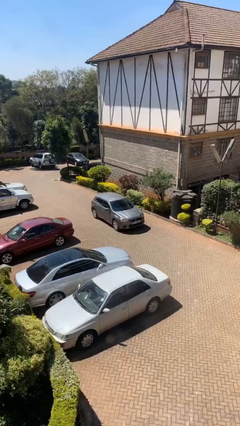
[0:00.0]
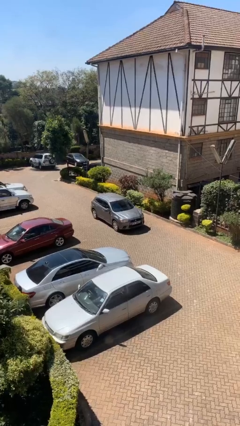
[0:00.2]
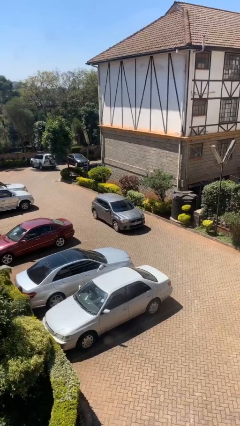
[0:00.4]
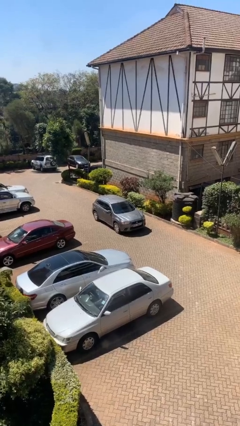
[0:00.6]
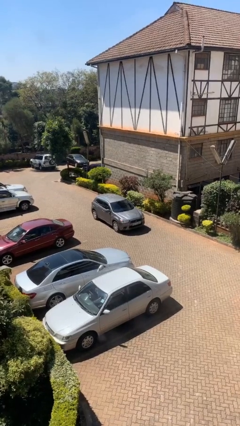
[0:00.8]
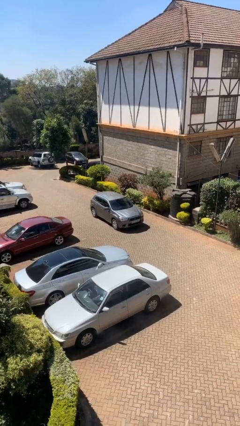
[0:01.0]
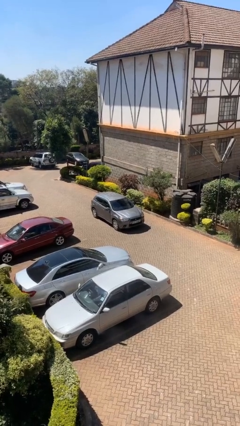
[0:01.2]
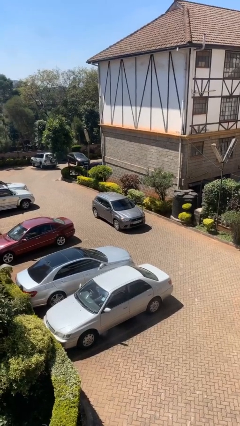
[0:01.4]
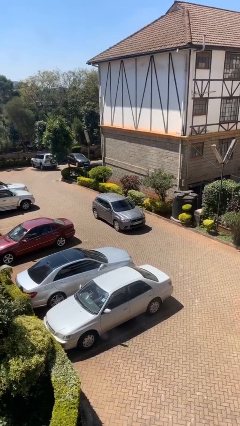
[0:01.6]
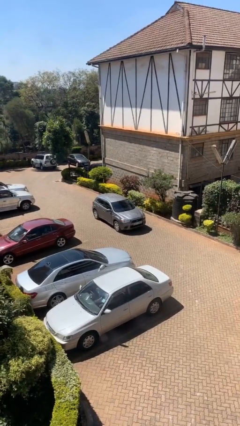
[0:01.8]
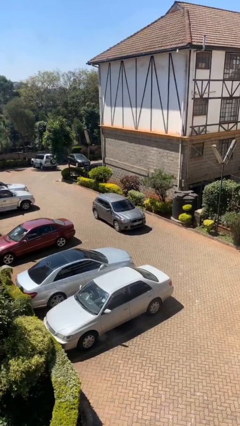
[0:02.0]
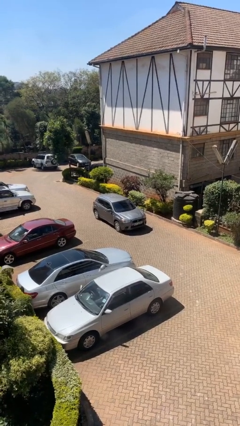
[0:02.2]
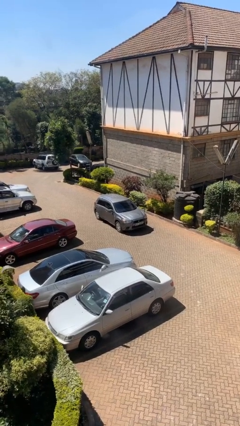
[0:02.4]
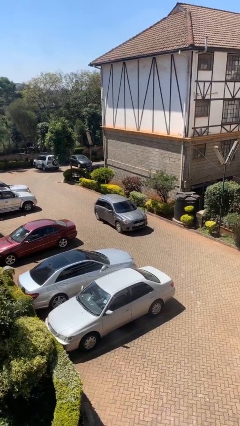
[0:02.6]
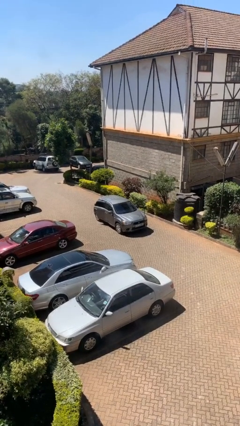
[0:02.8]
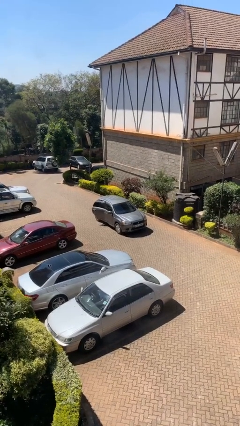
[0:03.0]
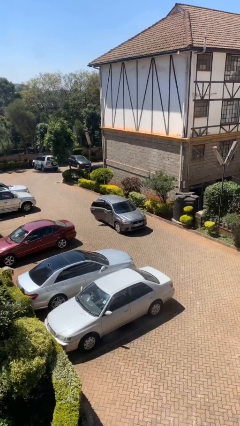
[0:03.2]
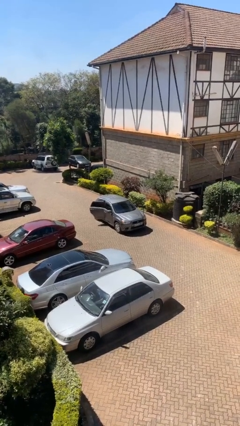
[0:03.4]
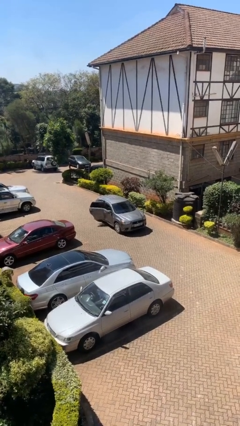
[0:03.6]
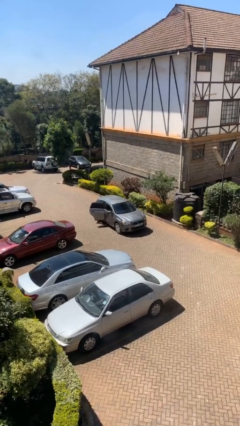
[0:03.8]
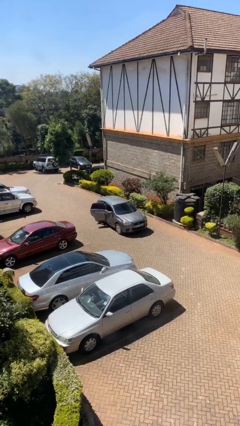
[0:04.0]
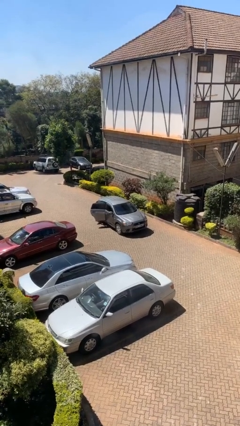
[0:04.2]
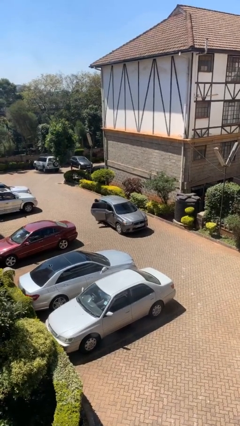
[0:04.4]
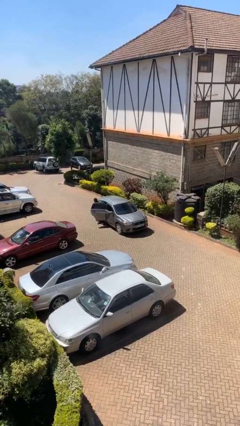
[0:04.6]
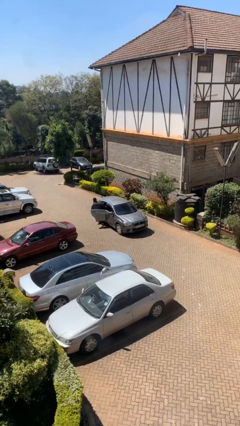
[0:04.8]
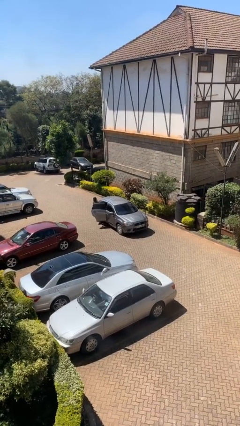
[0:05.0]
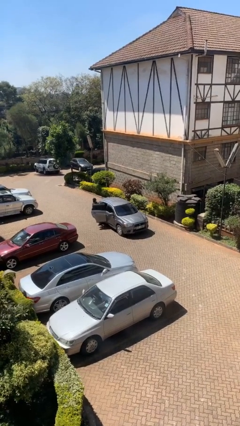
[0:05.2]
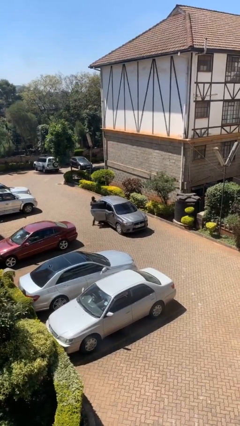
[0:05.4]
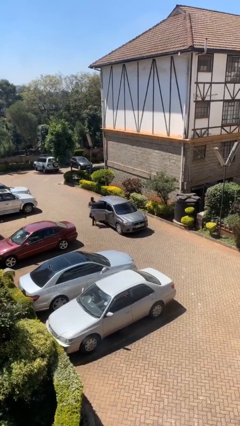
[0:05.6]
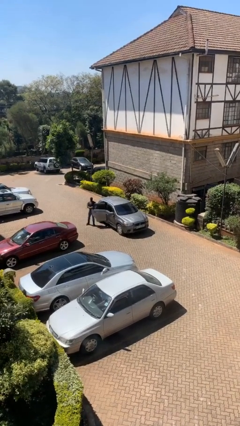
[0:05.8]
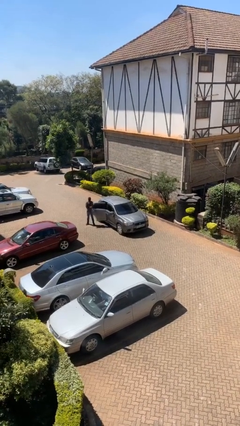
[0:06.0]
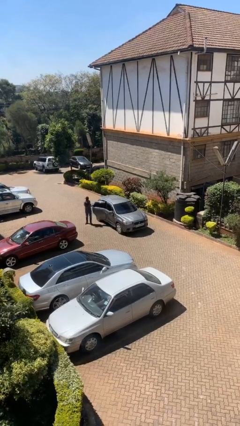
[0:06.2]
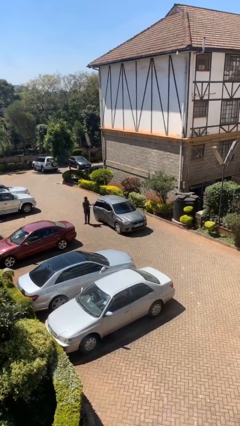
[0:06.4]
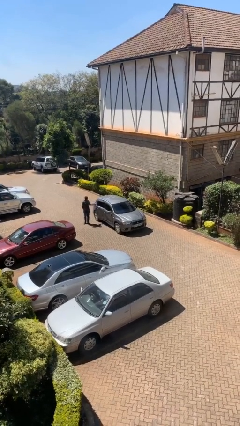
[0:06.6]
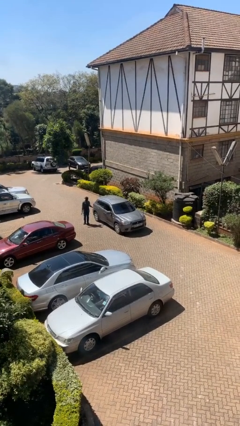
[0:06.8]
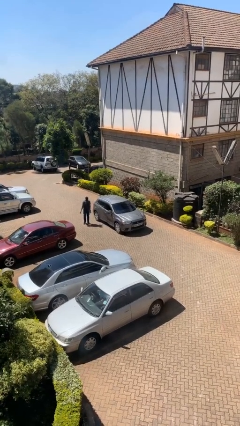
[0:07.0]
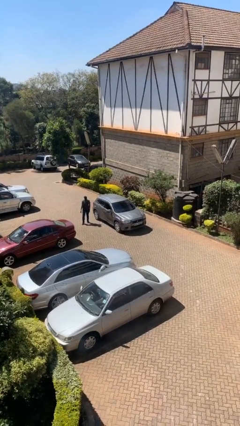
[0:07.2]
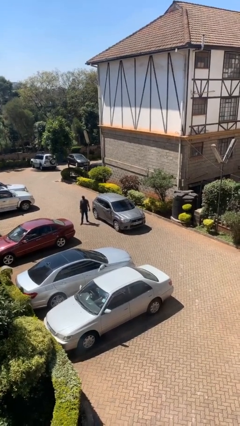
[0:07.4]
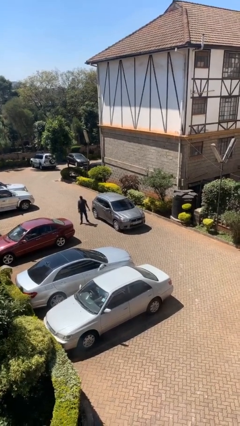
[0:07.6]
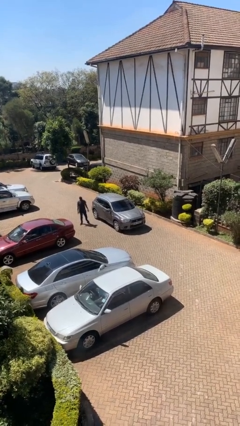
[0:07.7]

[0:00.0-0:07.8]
car drops off person

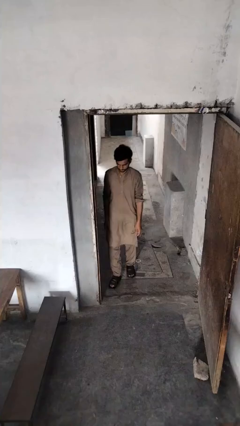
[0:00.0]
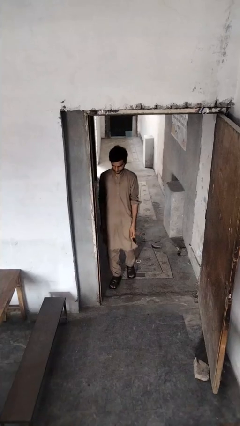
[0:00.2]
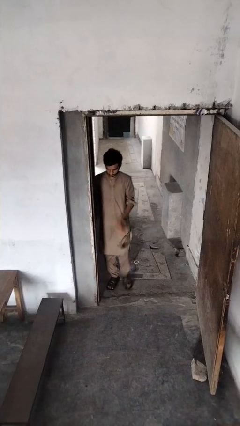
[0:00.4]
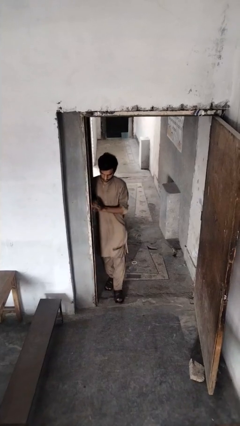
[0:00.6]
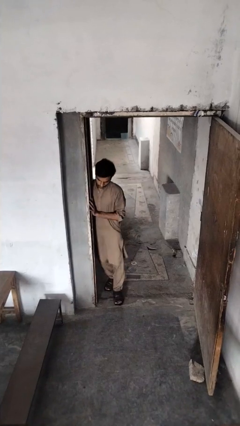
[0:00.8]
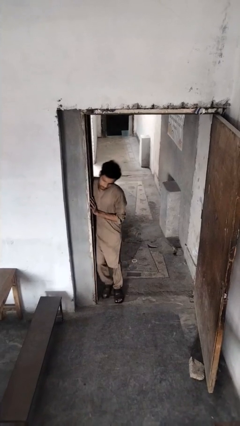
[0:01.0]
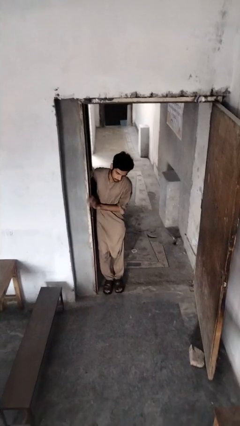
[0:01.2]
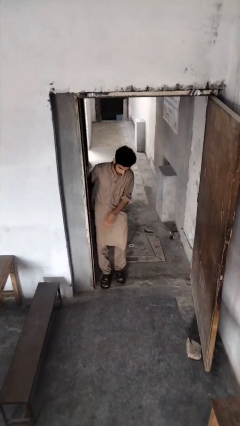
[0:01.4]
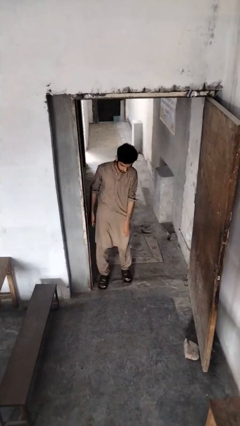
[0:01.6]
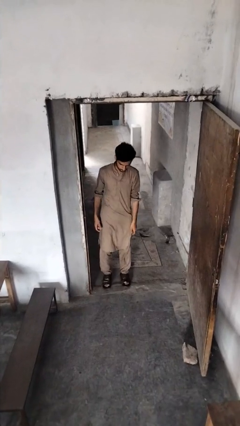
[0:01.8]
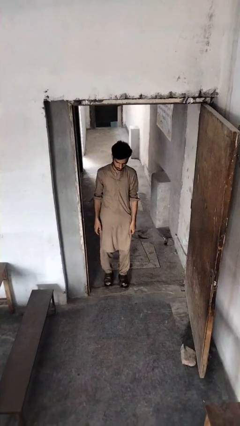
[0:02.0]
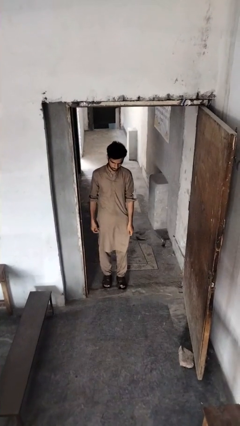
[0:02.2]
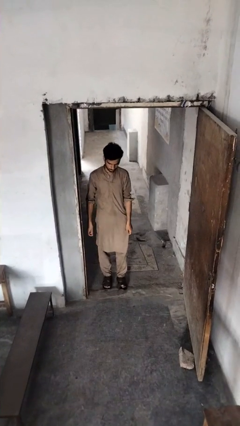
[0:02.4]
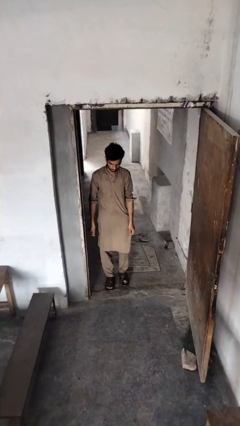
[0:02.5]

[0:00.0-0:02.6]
person bumps into wall

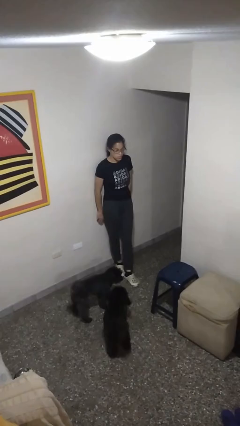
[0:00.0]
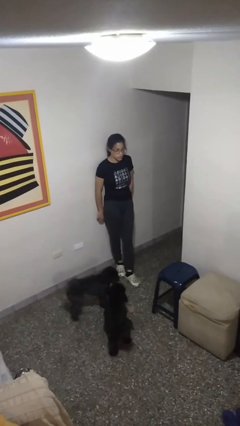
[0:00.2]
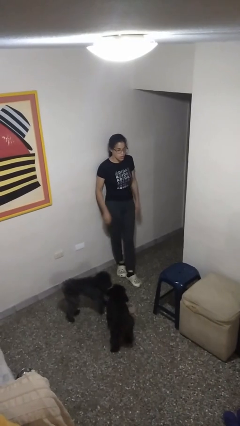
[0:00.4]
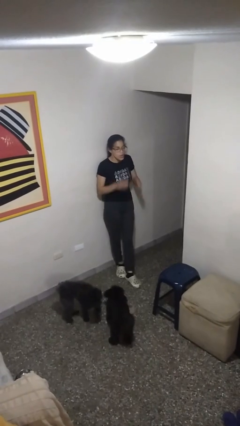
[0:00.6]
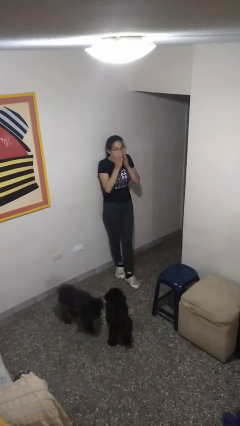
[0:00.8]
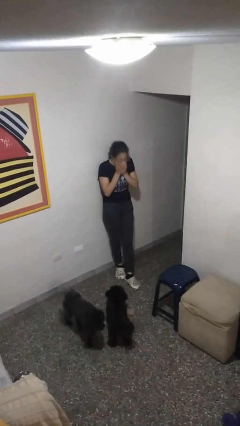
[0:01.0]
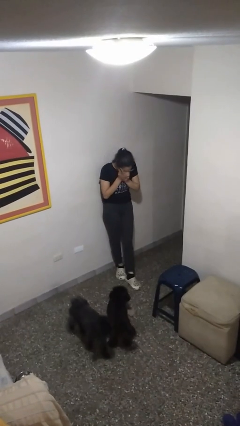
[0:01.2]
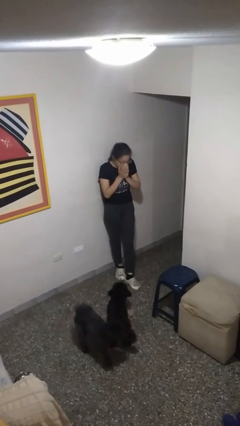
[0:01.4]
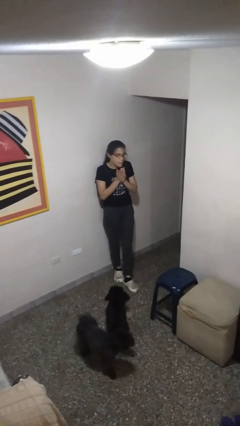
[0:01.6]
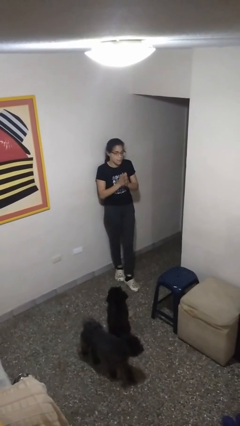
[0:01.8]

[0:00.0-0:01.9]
person sneezes into hand

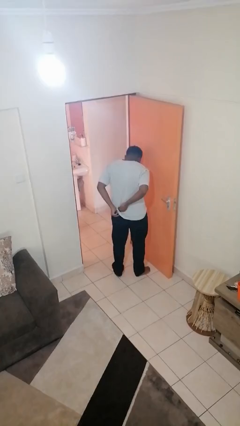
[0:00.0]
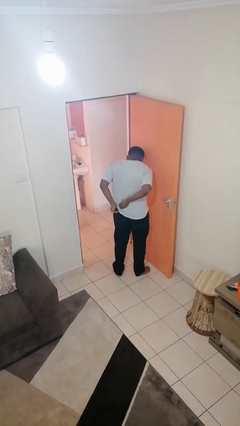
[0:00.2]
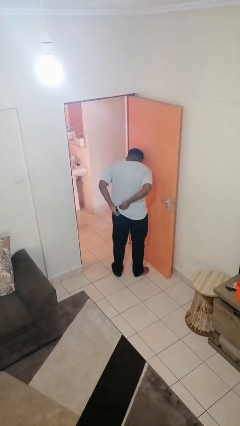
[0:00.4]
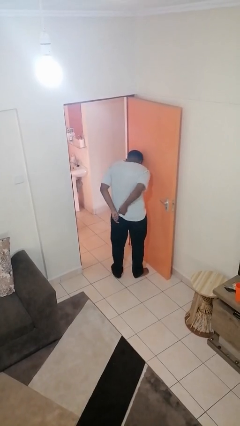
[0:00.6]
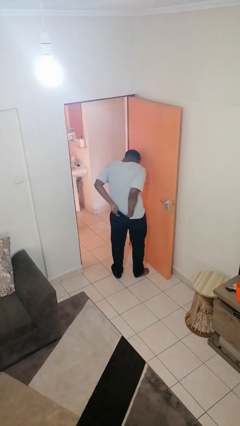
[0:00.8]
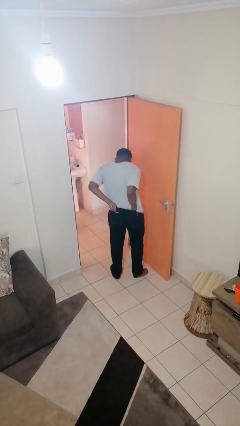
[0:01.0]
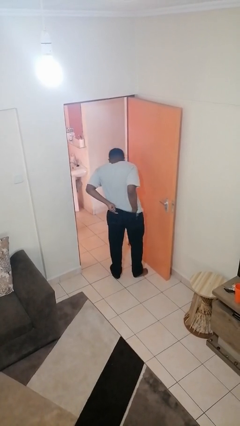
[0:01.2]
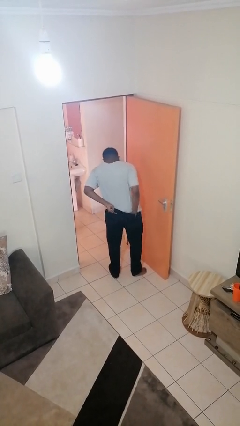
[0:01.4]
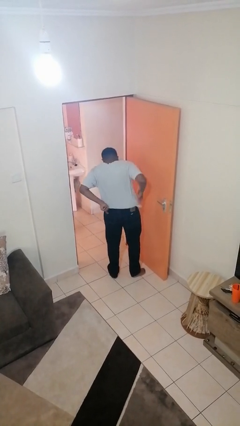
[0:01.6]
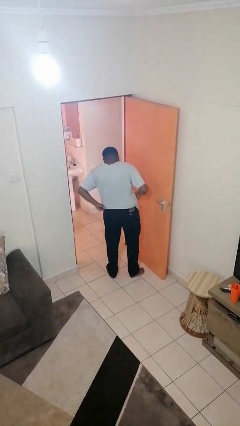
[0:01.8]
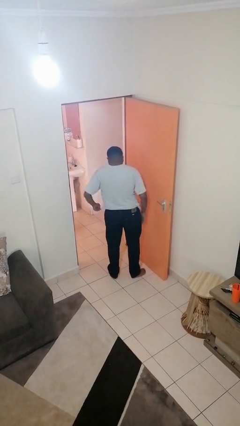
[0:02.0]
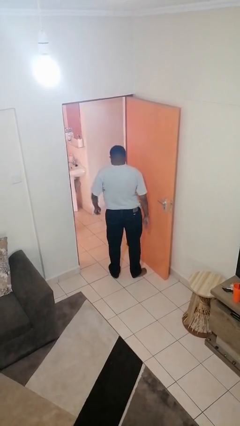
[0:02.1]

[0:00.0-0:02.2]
person tucks in shirt

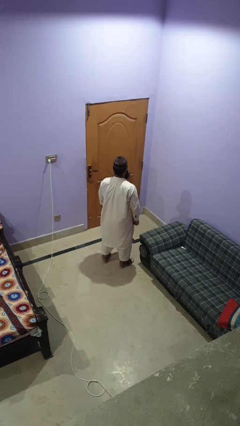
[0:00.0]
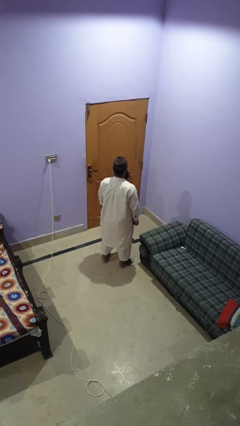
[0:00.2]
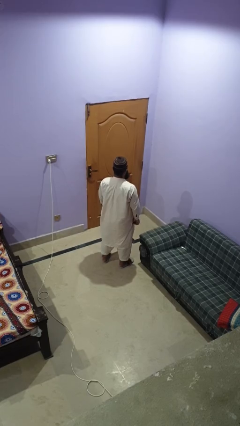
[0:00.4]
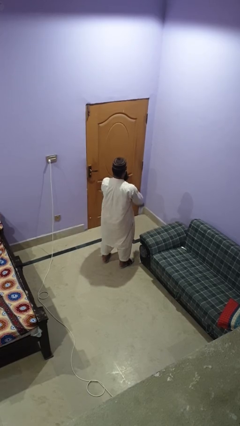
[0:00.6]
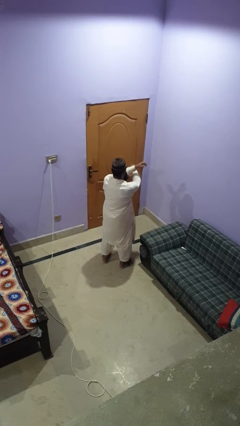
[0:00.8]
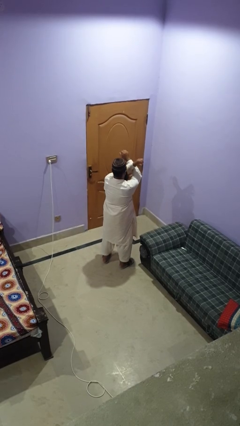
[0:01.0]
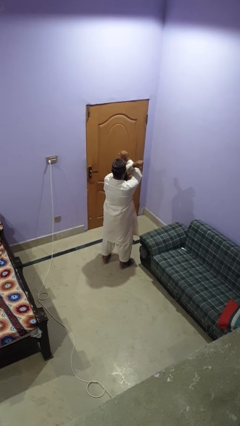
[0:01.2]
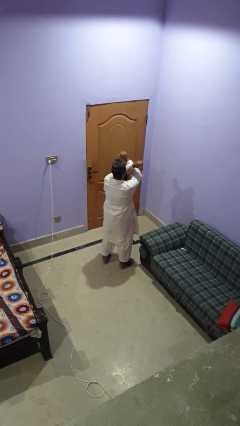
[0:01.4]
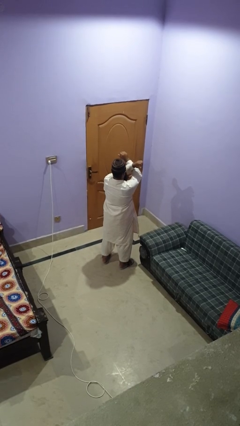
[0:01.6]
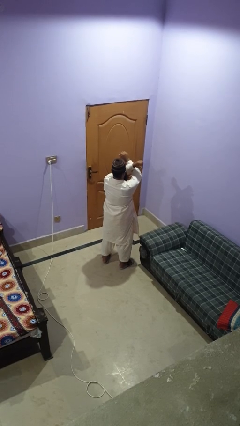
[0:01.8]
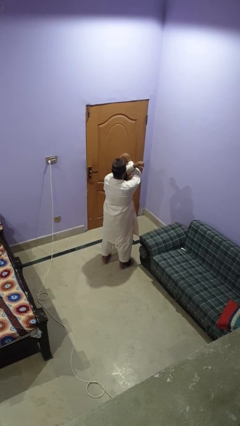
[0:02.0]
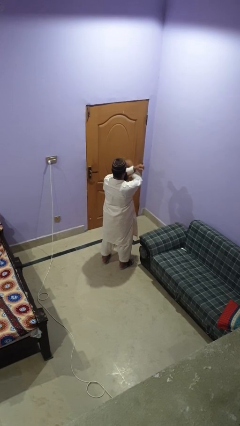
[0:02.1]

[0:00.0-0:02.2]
person gestures arms x

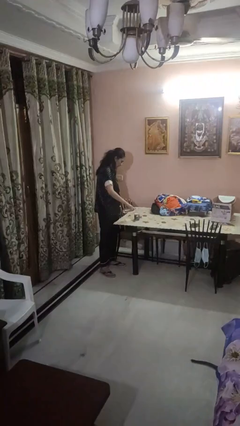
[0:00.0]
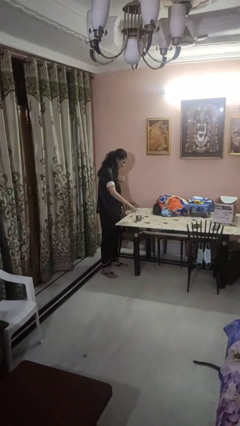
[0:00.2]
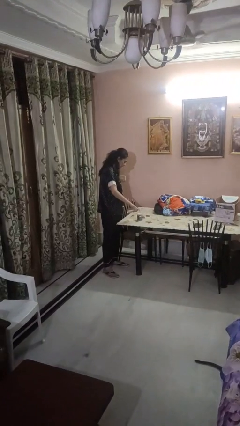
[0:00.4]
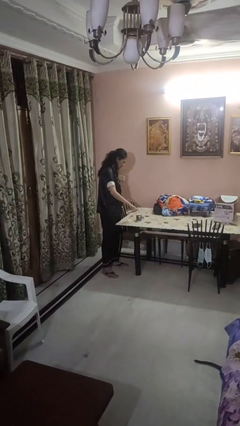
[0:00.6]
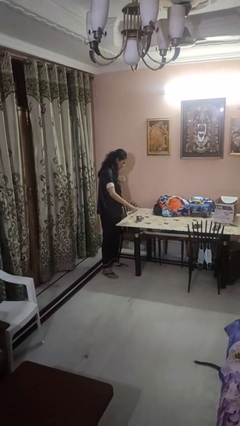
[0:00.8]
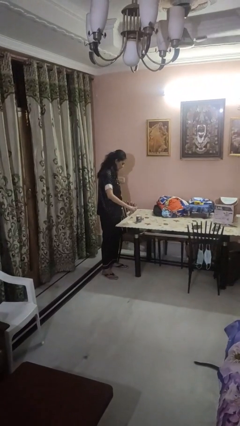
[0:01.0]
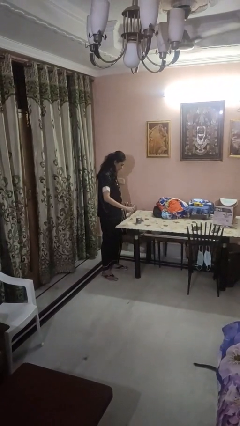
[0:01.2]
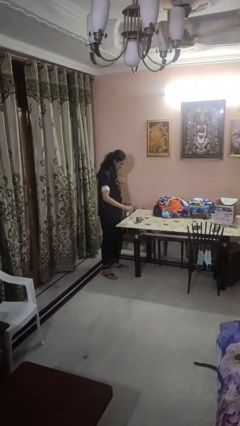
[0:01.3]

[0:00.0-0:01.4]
person pours liquid into cup
